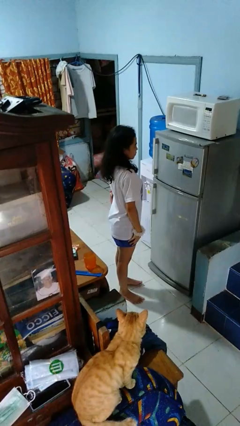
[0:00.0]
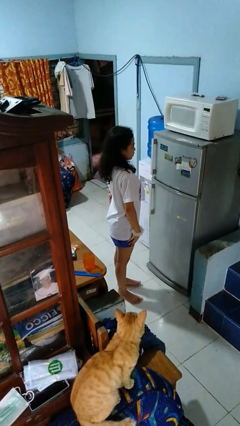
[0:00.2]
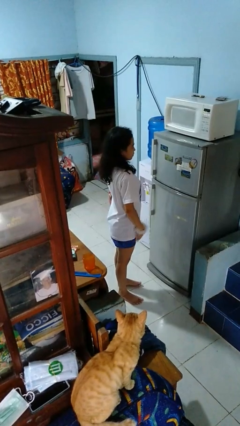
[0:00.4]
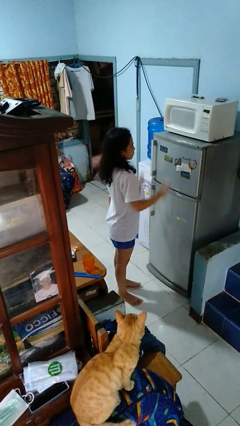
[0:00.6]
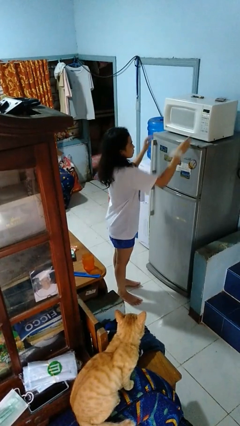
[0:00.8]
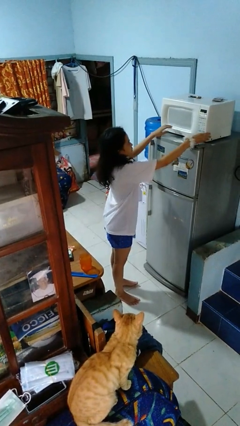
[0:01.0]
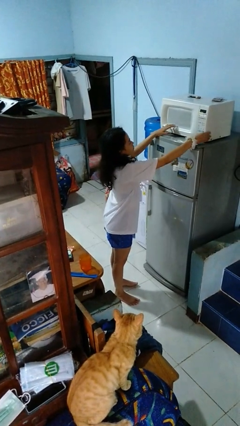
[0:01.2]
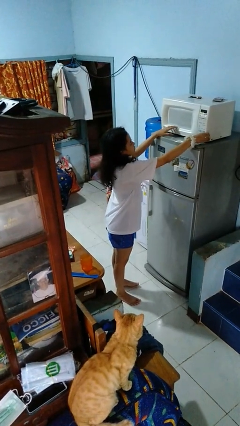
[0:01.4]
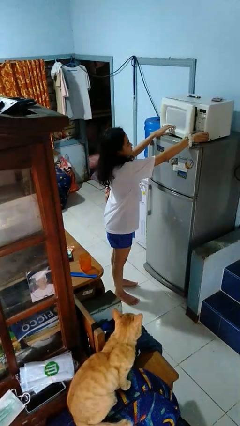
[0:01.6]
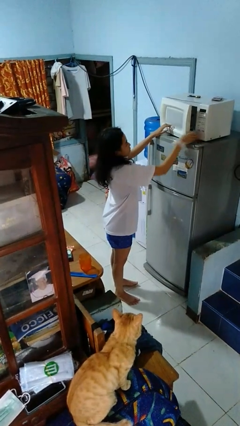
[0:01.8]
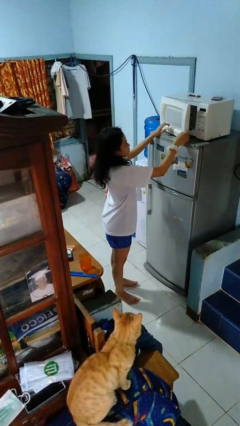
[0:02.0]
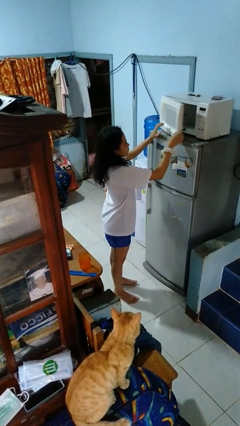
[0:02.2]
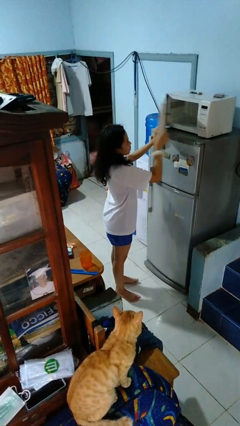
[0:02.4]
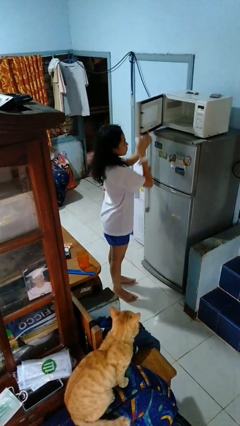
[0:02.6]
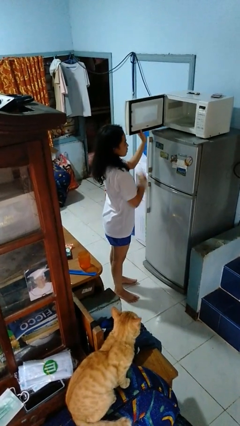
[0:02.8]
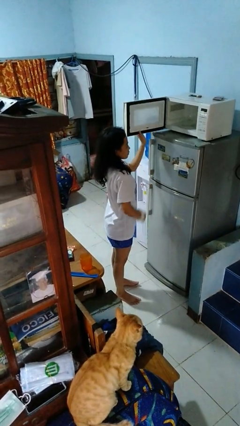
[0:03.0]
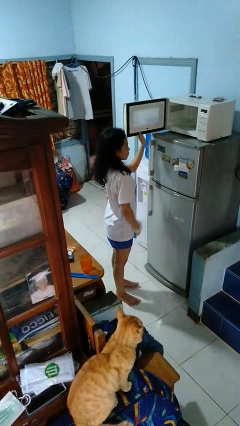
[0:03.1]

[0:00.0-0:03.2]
person opens microwave

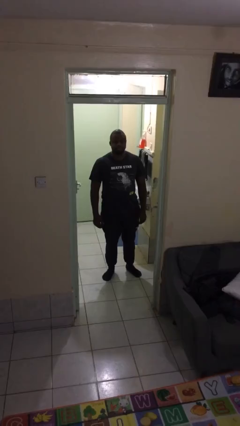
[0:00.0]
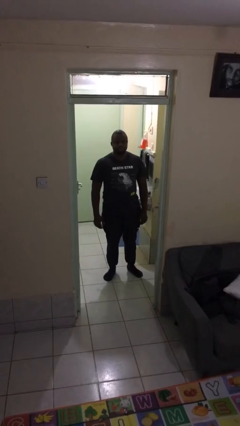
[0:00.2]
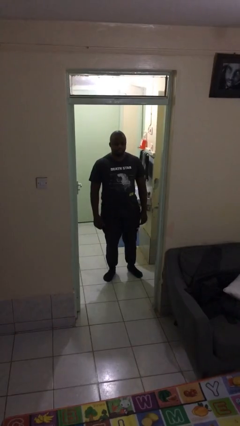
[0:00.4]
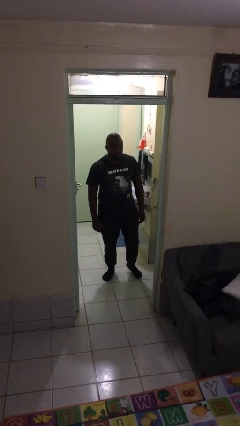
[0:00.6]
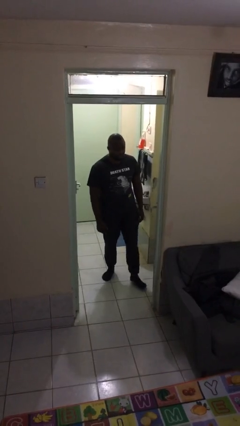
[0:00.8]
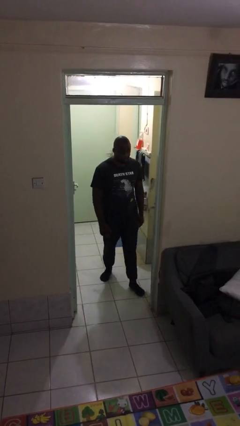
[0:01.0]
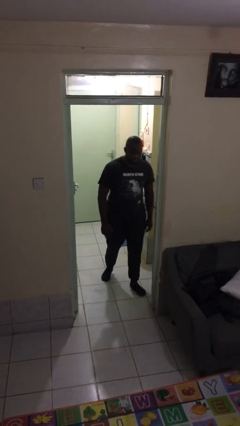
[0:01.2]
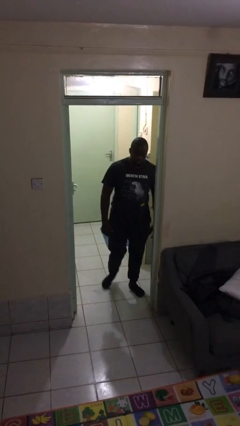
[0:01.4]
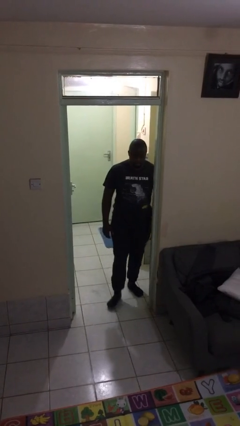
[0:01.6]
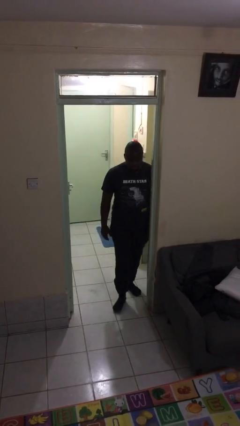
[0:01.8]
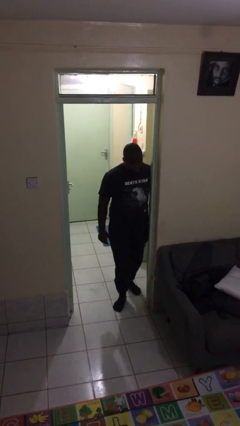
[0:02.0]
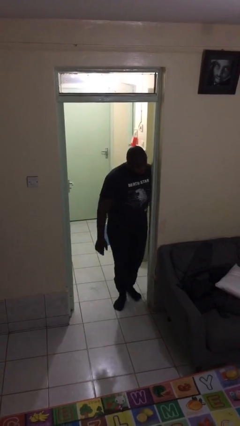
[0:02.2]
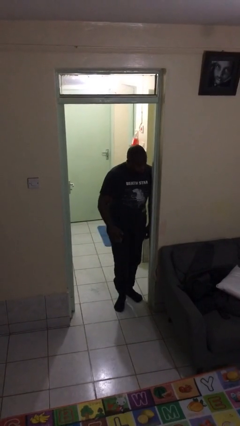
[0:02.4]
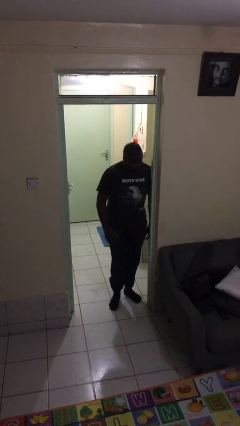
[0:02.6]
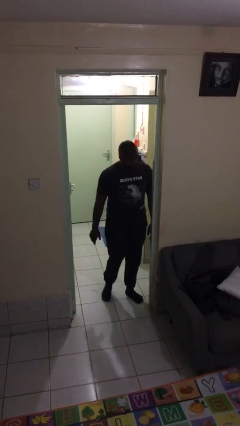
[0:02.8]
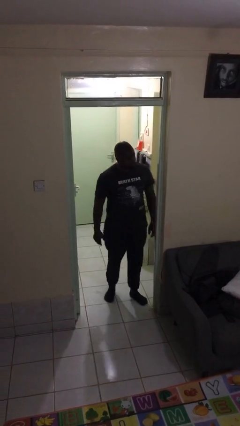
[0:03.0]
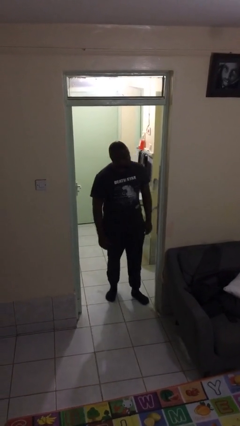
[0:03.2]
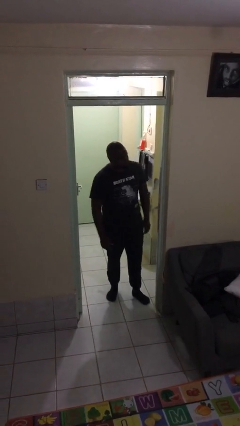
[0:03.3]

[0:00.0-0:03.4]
person bumps into wall

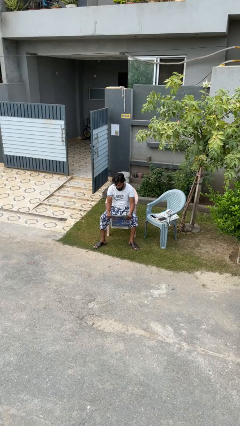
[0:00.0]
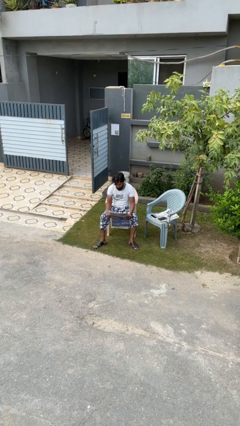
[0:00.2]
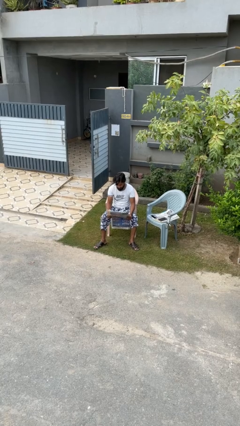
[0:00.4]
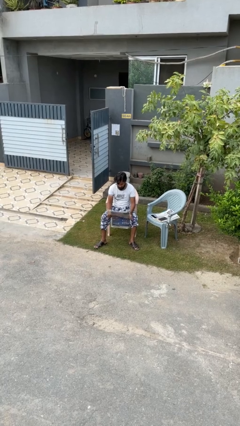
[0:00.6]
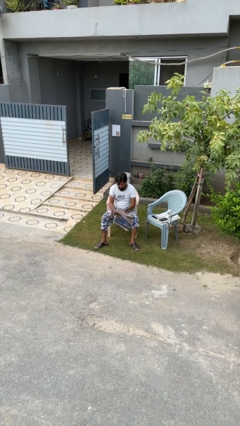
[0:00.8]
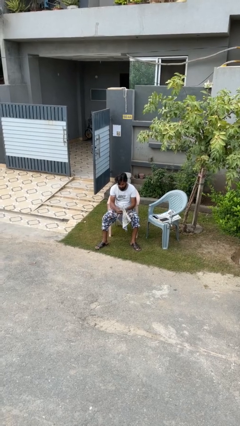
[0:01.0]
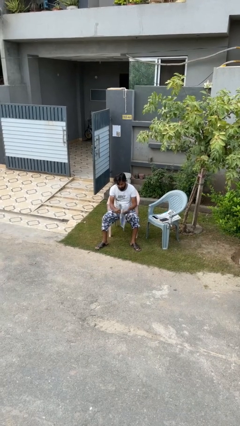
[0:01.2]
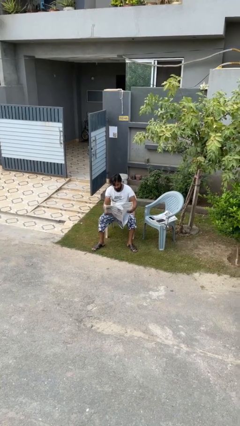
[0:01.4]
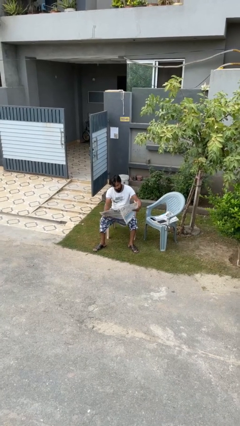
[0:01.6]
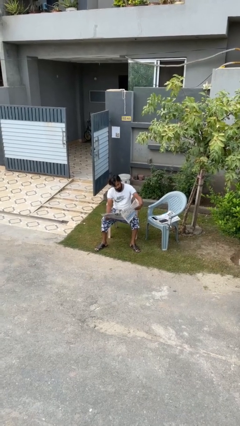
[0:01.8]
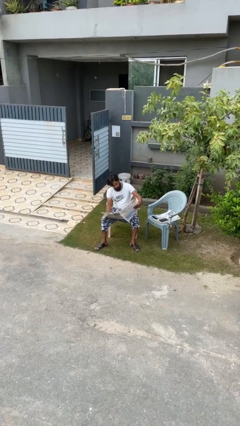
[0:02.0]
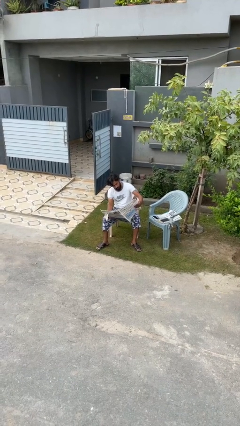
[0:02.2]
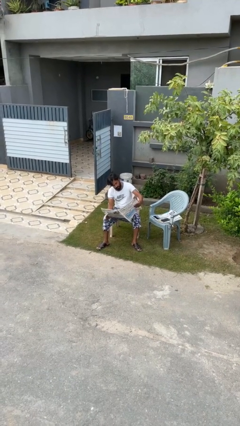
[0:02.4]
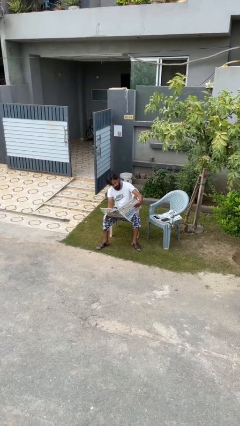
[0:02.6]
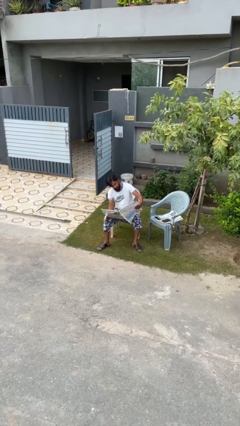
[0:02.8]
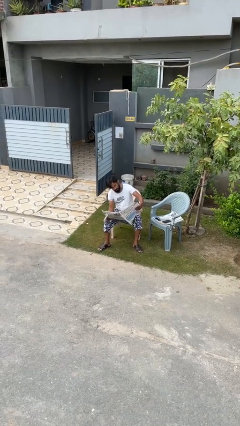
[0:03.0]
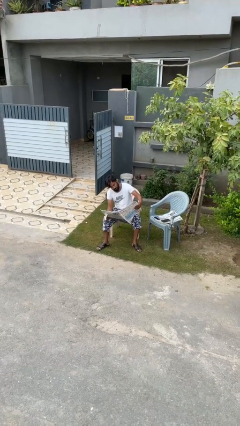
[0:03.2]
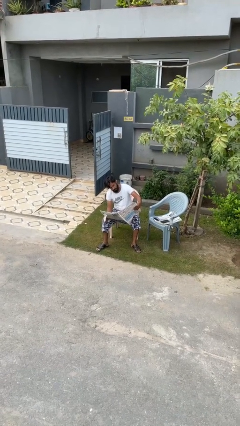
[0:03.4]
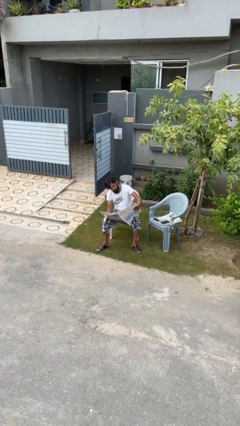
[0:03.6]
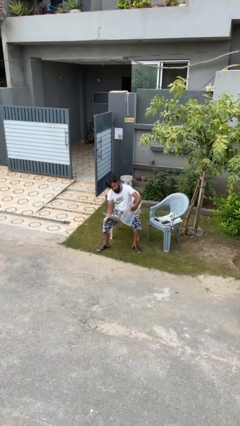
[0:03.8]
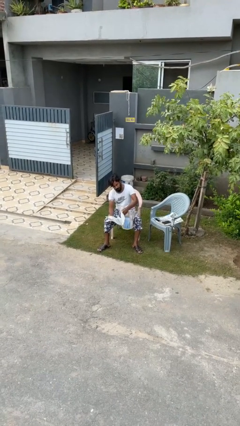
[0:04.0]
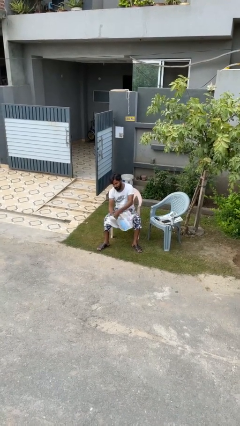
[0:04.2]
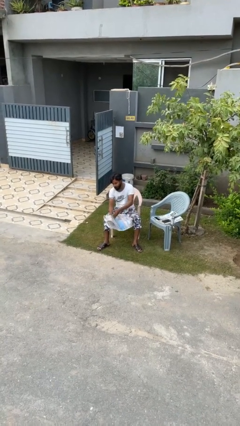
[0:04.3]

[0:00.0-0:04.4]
person reads newspaper

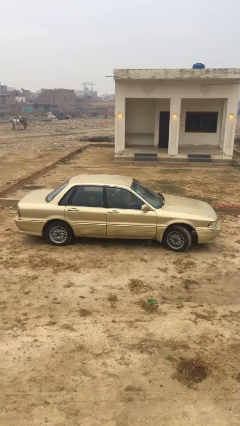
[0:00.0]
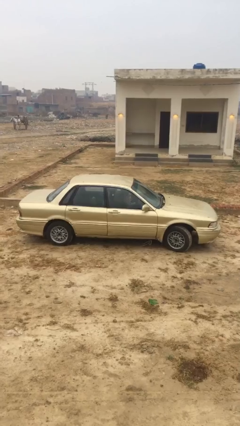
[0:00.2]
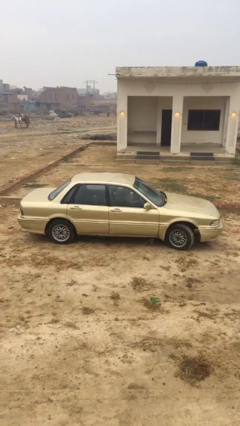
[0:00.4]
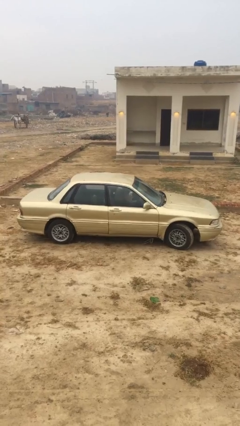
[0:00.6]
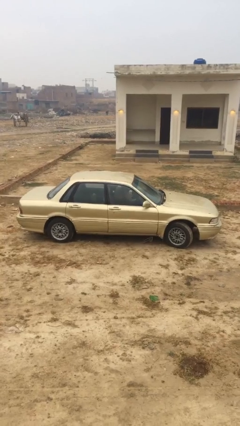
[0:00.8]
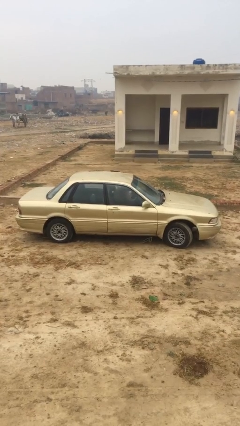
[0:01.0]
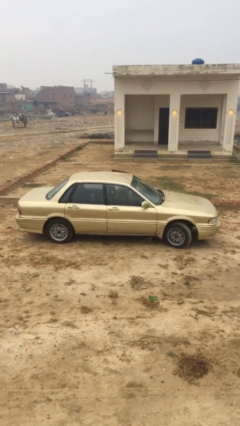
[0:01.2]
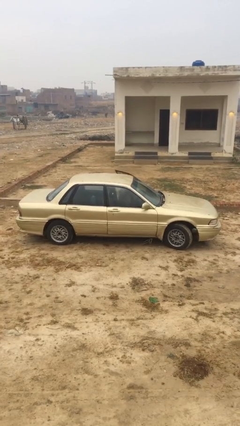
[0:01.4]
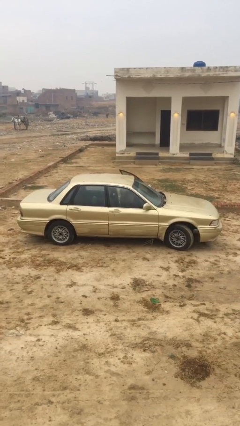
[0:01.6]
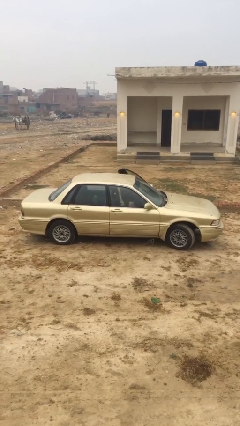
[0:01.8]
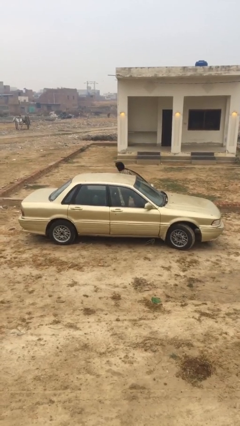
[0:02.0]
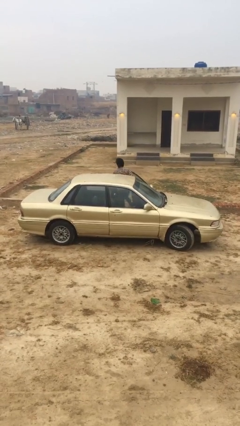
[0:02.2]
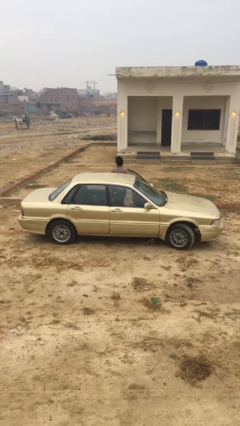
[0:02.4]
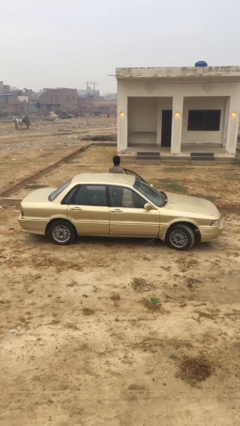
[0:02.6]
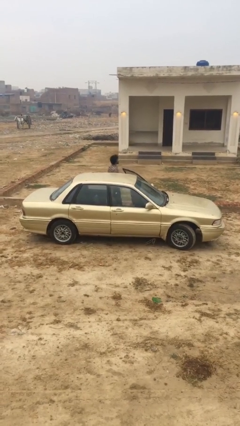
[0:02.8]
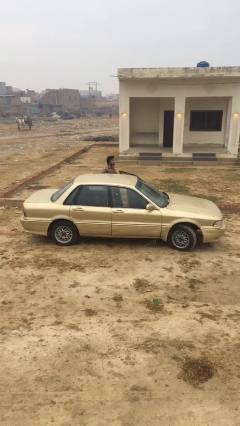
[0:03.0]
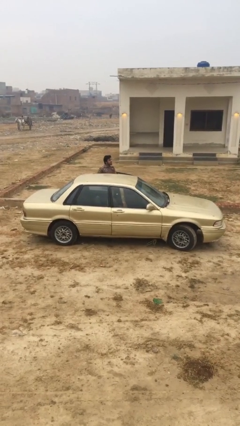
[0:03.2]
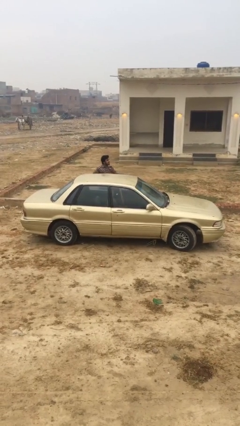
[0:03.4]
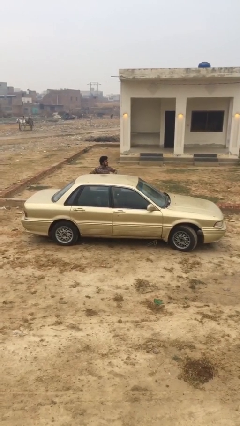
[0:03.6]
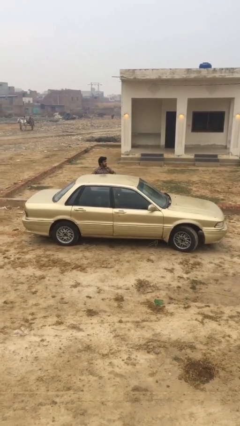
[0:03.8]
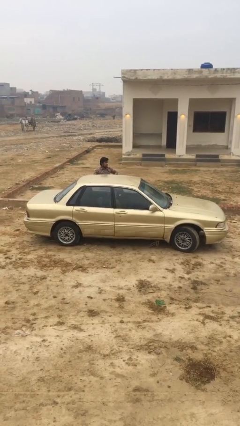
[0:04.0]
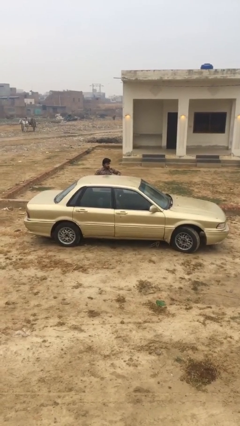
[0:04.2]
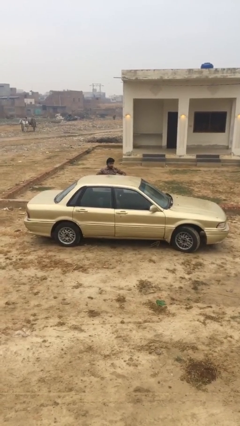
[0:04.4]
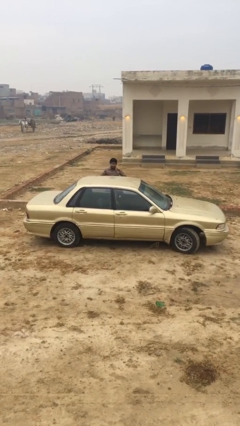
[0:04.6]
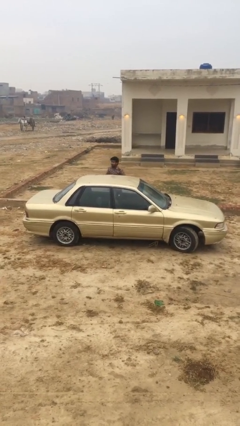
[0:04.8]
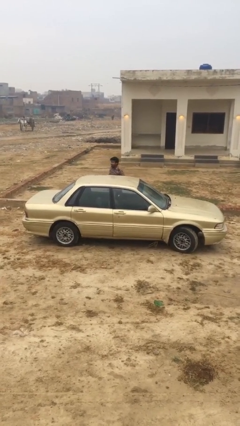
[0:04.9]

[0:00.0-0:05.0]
car drops off person

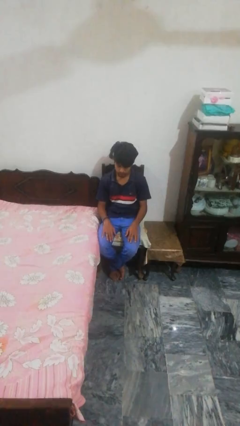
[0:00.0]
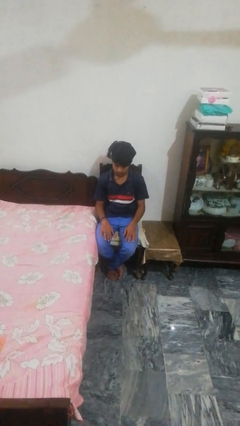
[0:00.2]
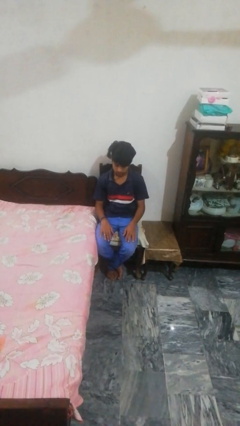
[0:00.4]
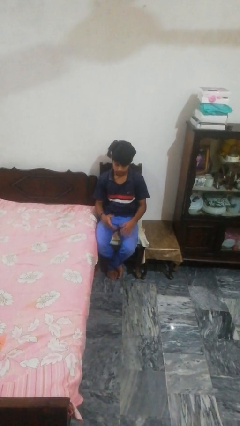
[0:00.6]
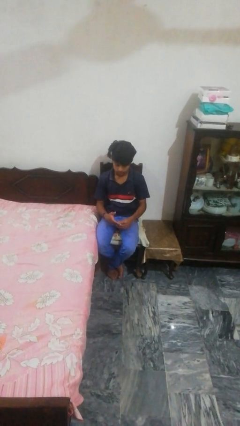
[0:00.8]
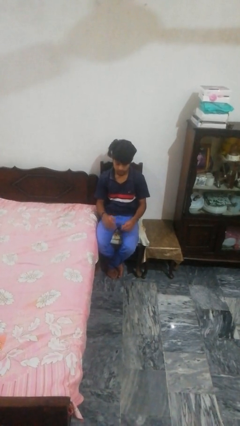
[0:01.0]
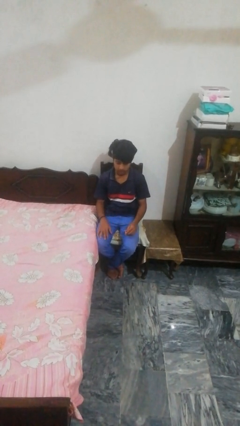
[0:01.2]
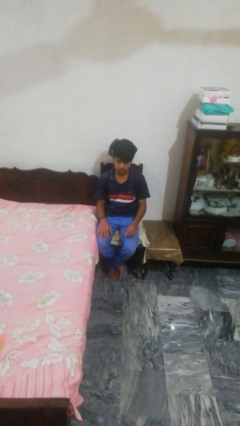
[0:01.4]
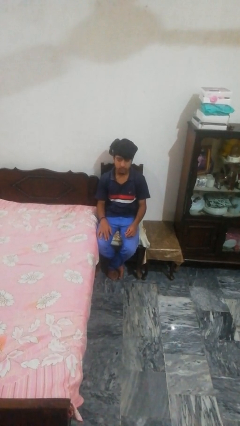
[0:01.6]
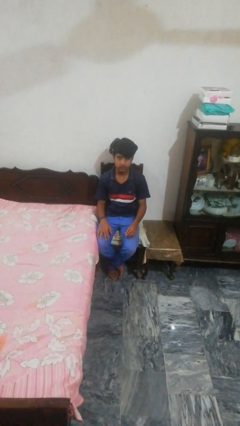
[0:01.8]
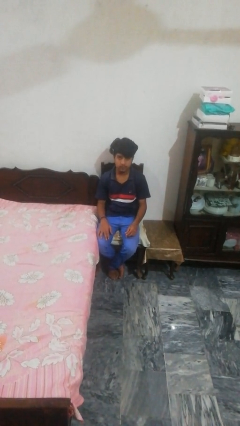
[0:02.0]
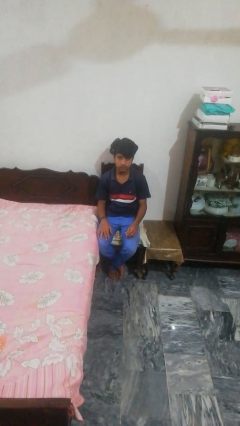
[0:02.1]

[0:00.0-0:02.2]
person takes off ring
